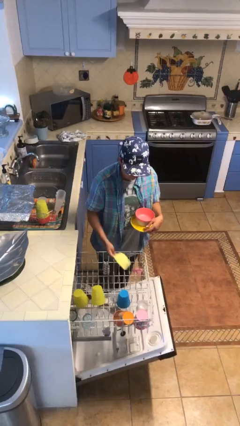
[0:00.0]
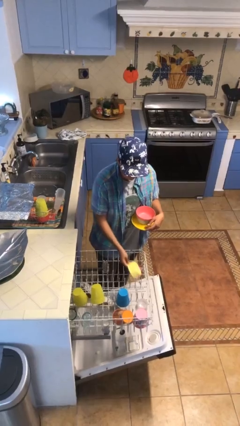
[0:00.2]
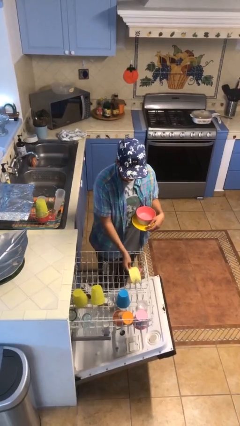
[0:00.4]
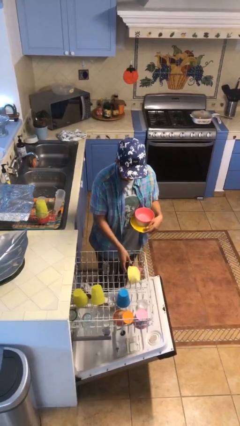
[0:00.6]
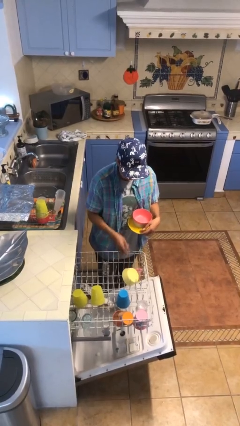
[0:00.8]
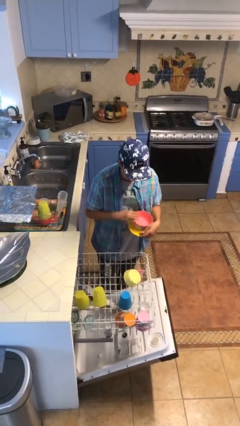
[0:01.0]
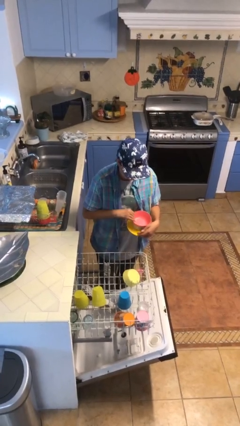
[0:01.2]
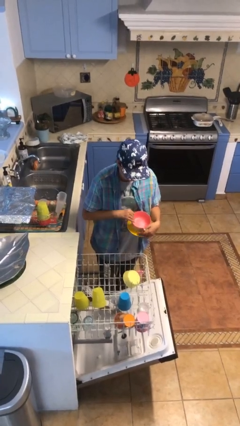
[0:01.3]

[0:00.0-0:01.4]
person loads dishwasher

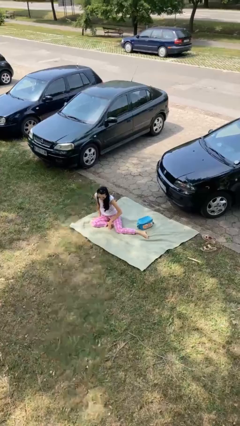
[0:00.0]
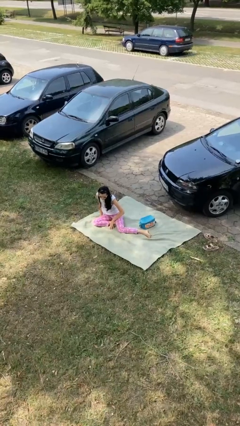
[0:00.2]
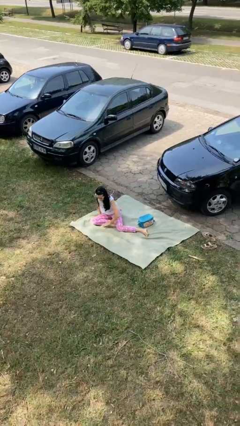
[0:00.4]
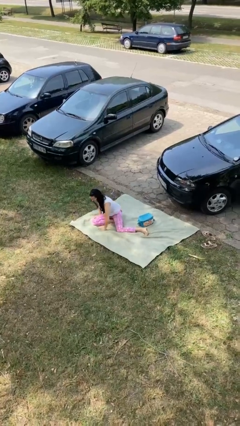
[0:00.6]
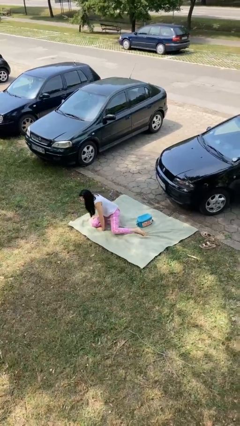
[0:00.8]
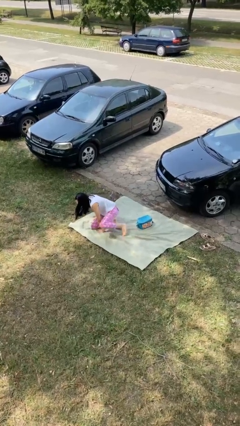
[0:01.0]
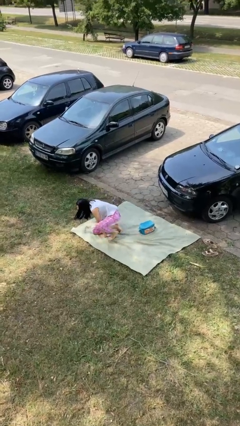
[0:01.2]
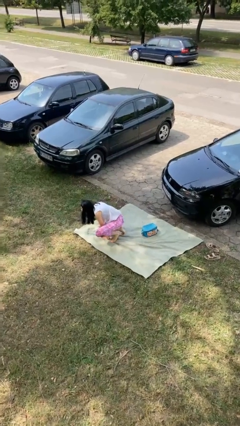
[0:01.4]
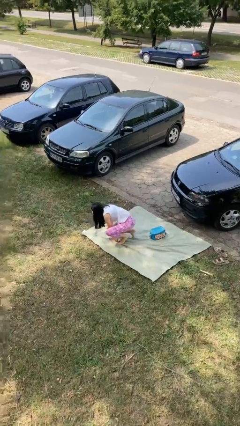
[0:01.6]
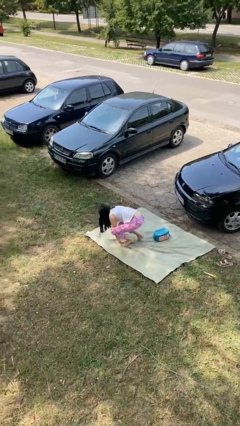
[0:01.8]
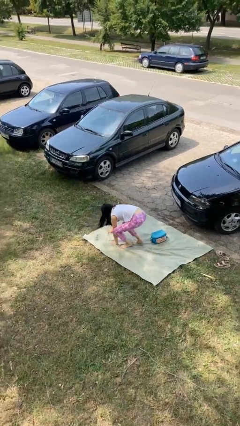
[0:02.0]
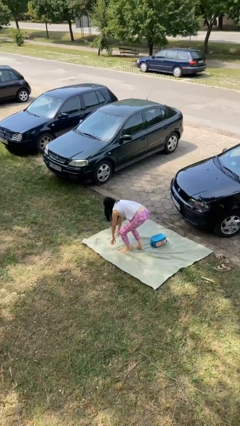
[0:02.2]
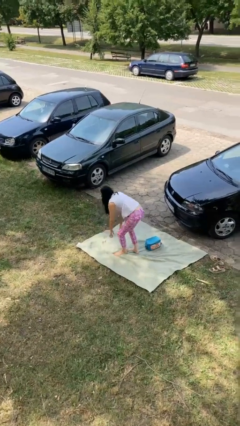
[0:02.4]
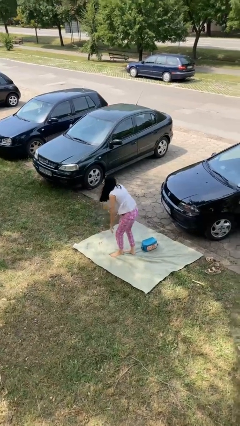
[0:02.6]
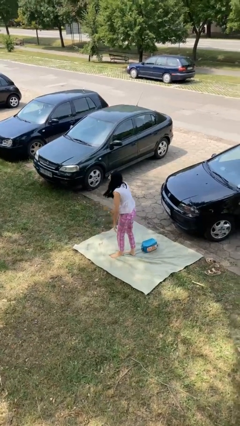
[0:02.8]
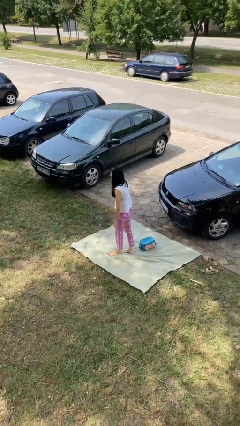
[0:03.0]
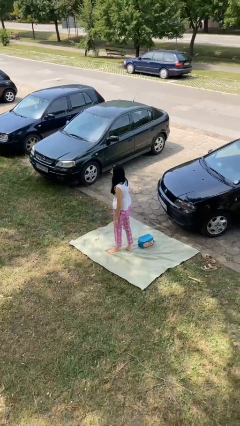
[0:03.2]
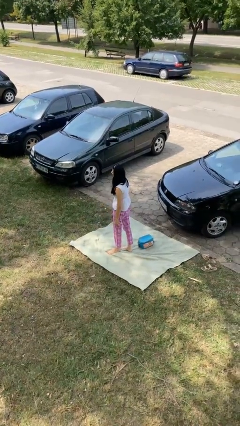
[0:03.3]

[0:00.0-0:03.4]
person stands up from floor

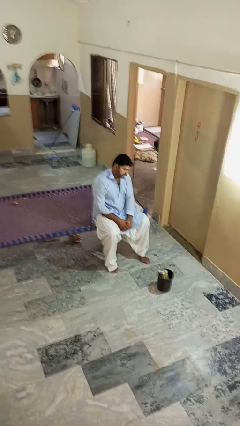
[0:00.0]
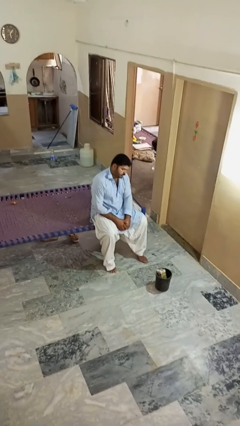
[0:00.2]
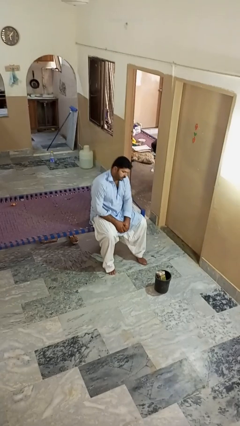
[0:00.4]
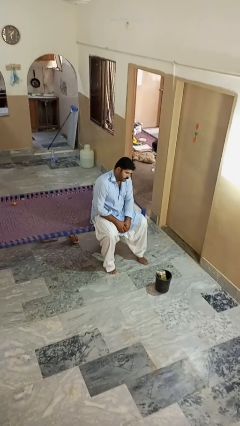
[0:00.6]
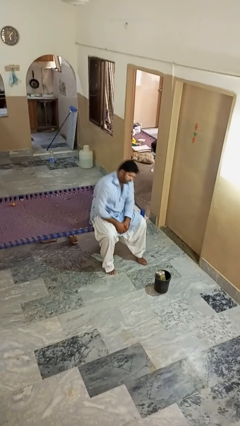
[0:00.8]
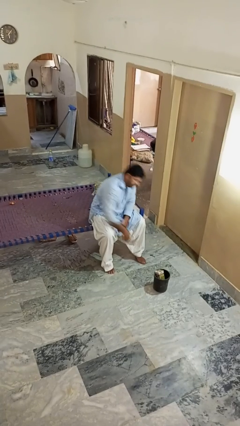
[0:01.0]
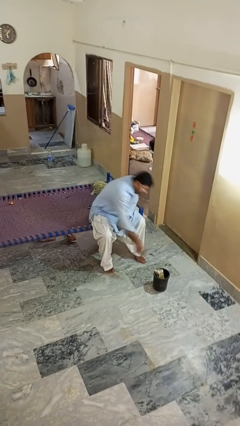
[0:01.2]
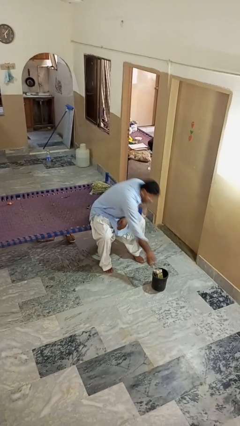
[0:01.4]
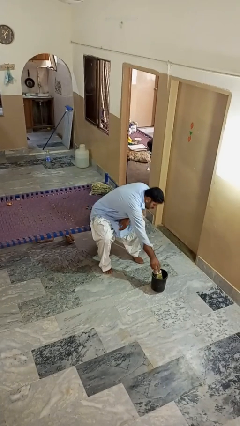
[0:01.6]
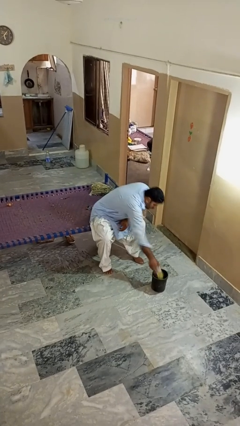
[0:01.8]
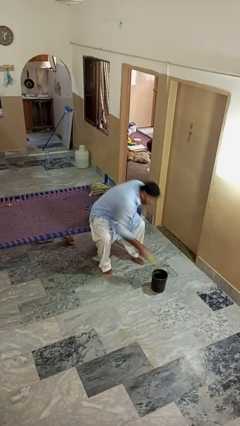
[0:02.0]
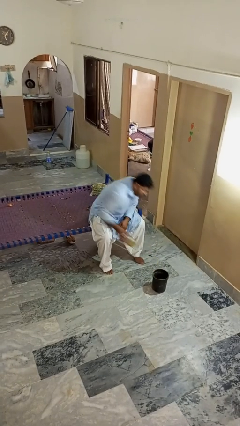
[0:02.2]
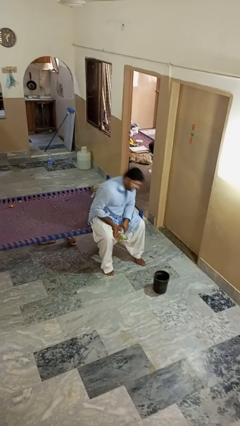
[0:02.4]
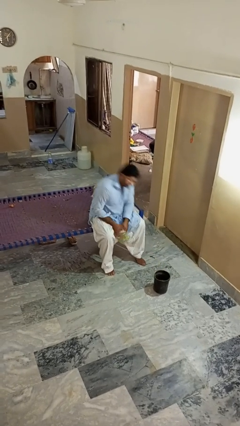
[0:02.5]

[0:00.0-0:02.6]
person takes object from basket

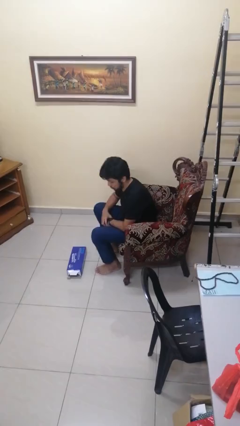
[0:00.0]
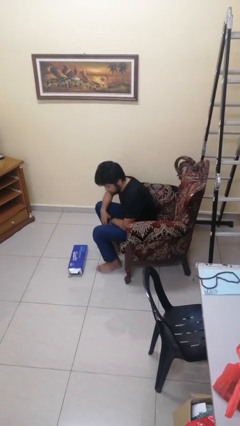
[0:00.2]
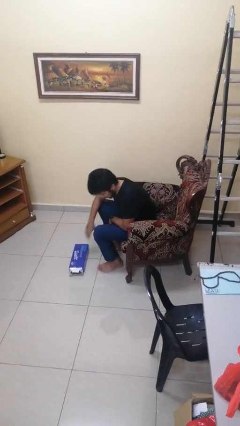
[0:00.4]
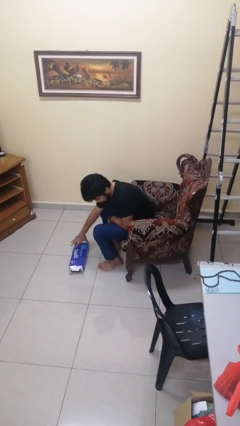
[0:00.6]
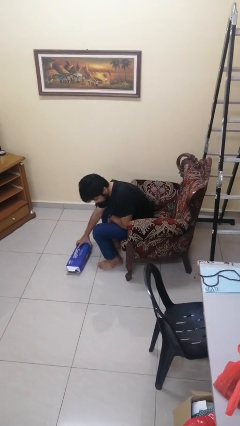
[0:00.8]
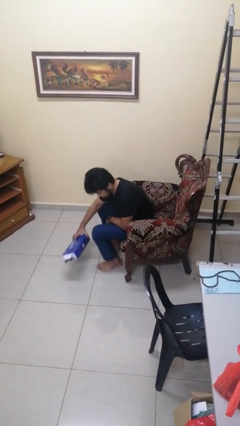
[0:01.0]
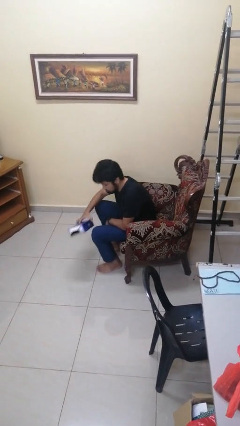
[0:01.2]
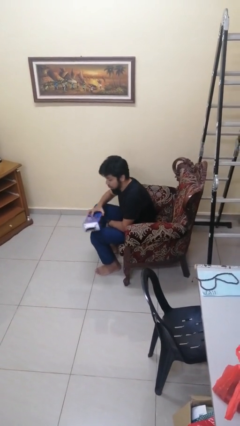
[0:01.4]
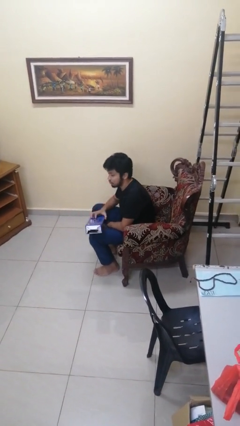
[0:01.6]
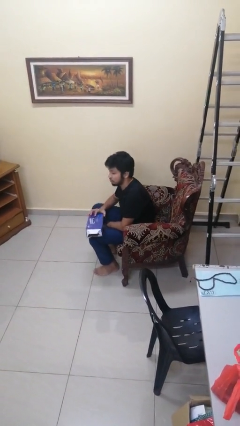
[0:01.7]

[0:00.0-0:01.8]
person picks up object from floor

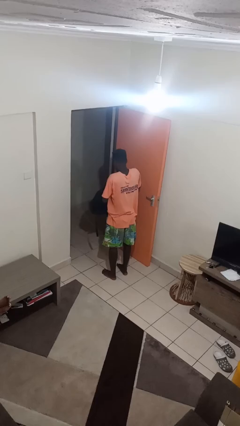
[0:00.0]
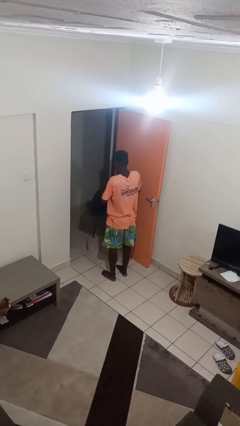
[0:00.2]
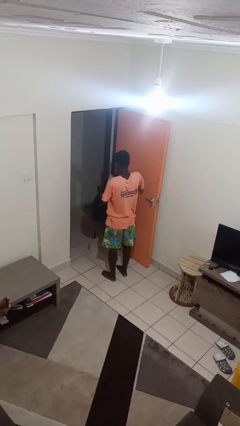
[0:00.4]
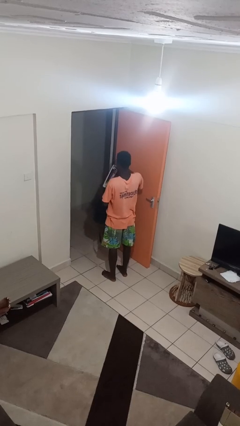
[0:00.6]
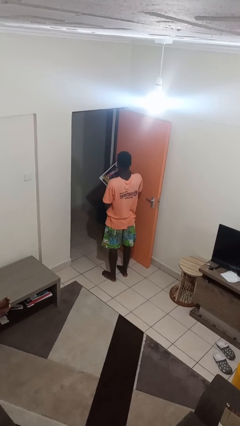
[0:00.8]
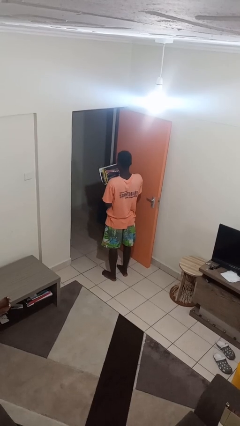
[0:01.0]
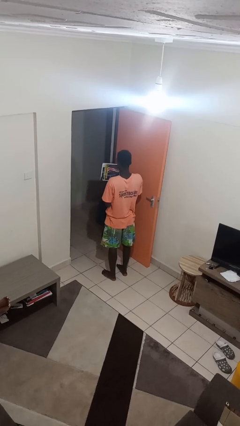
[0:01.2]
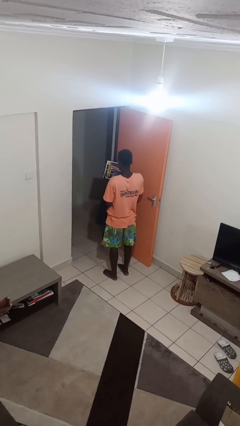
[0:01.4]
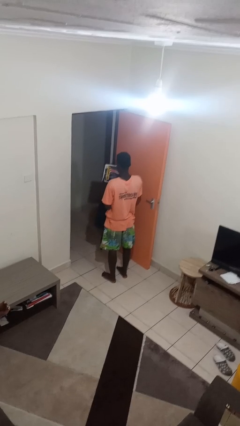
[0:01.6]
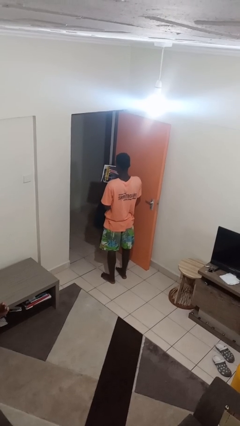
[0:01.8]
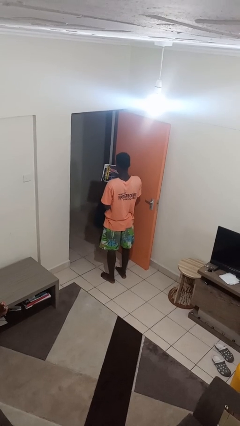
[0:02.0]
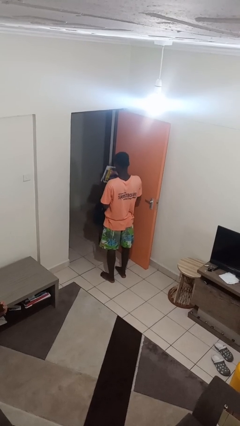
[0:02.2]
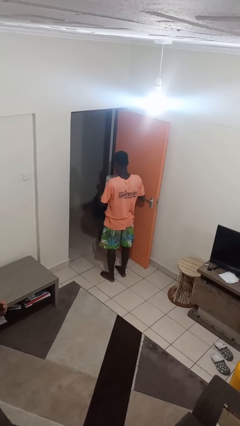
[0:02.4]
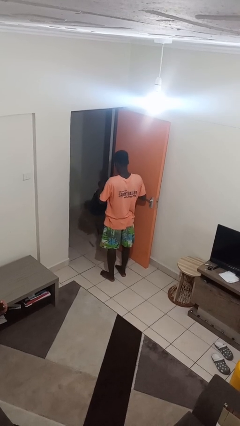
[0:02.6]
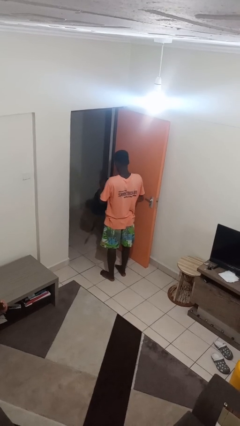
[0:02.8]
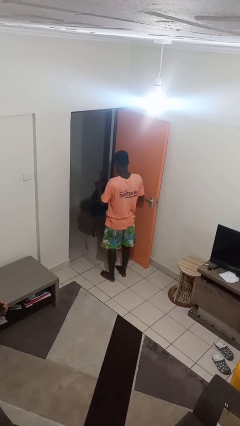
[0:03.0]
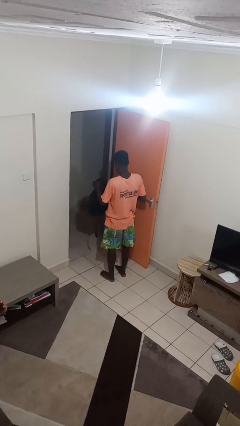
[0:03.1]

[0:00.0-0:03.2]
person takes object from backpack

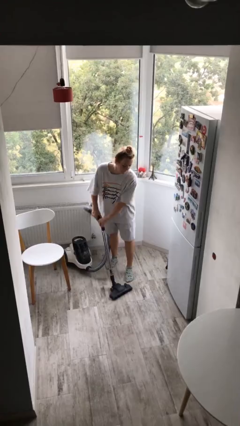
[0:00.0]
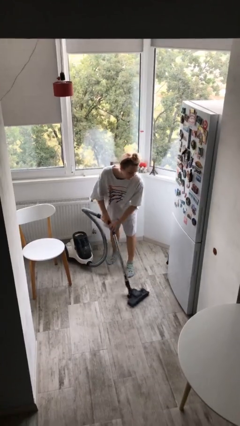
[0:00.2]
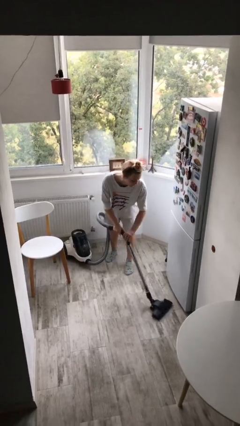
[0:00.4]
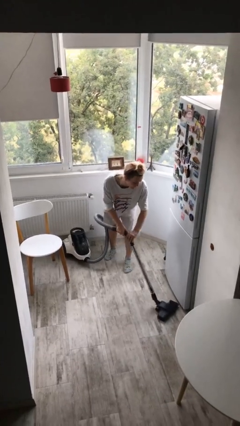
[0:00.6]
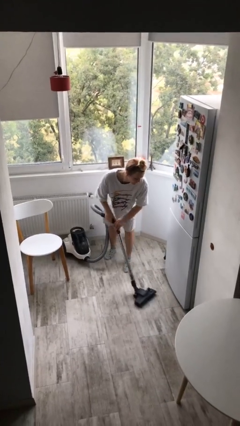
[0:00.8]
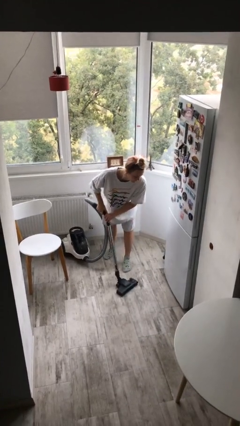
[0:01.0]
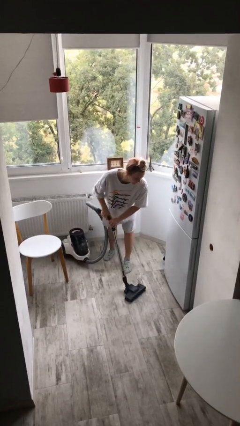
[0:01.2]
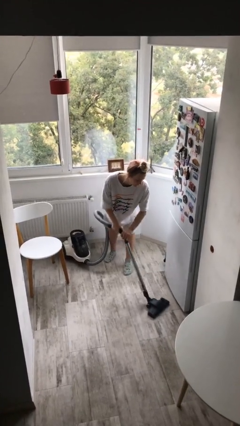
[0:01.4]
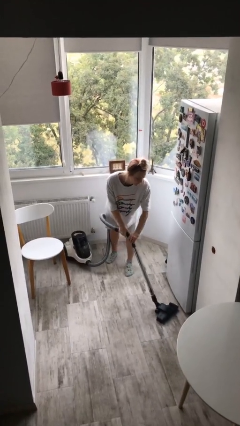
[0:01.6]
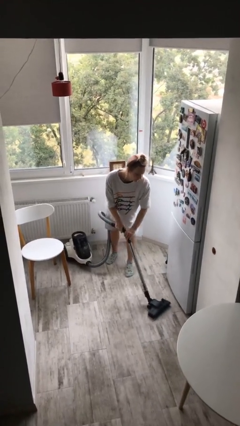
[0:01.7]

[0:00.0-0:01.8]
person vacuums carpet

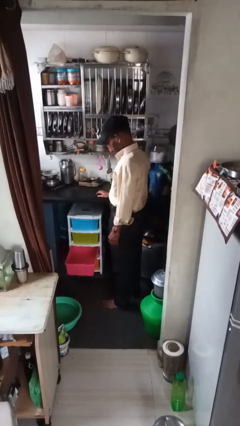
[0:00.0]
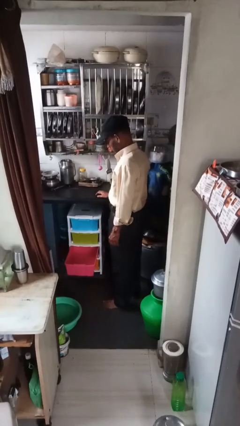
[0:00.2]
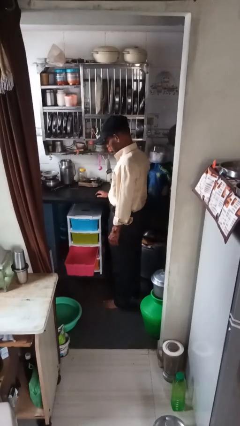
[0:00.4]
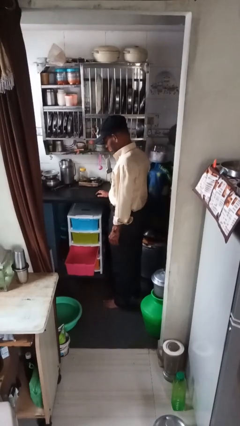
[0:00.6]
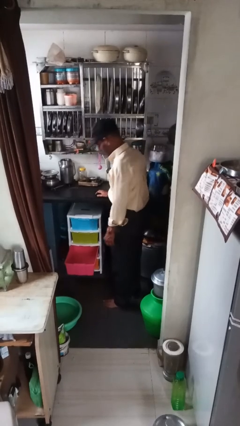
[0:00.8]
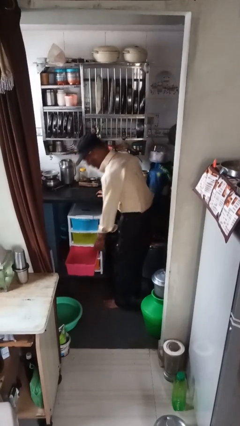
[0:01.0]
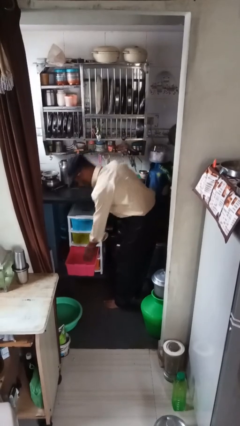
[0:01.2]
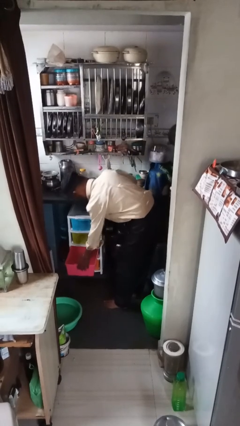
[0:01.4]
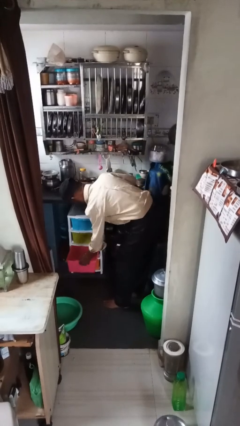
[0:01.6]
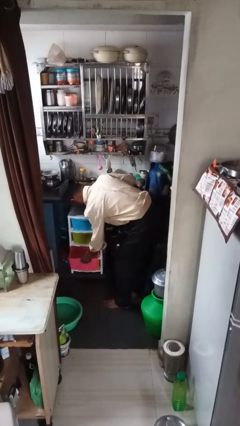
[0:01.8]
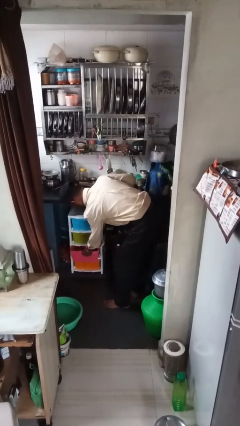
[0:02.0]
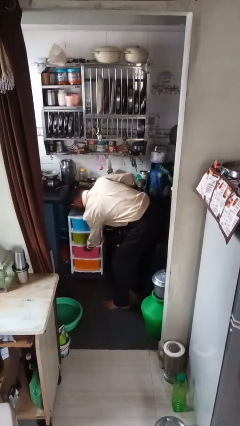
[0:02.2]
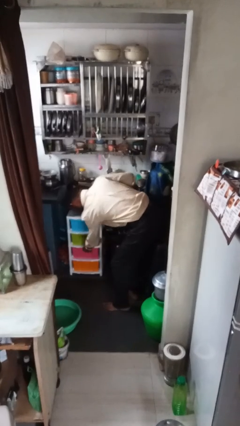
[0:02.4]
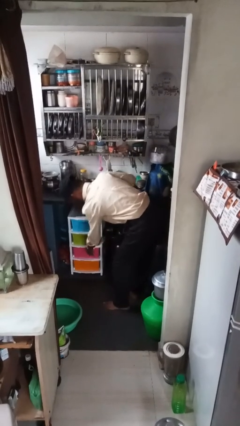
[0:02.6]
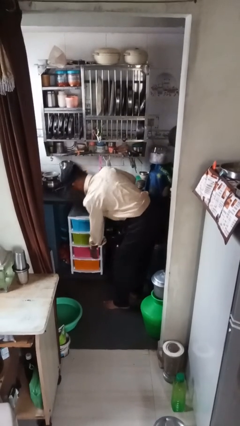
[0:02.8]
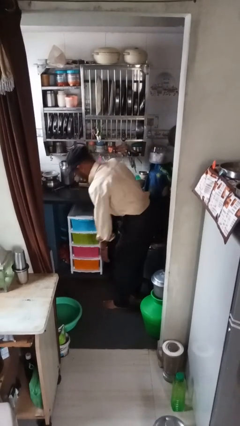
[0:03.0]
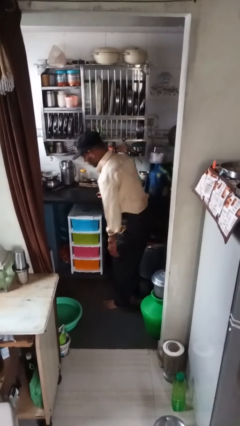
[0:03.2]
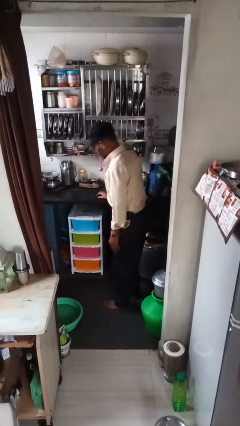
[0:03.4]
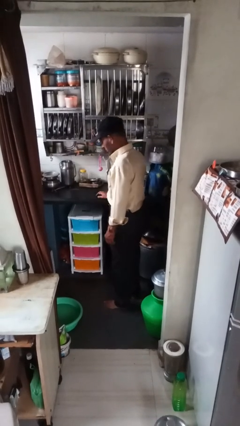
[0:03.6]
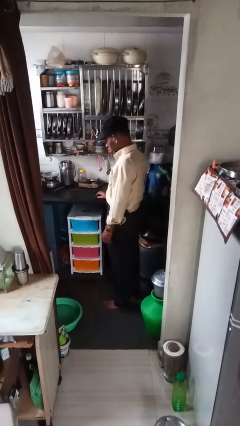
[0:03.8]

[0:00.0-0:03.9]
person closes kitchen drawer
